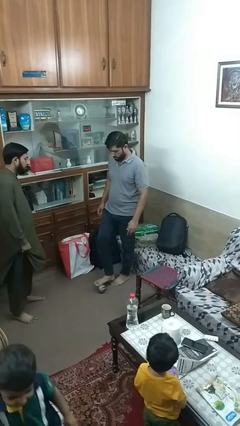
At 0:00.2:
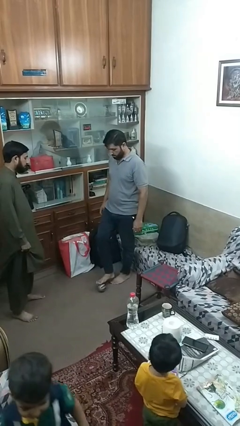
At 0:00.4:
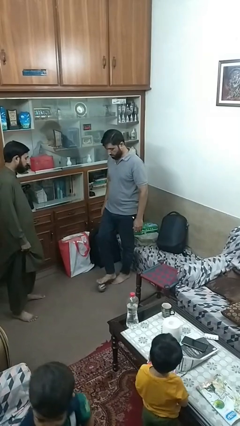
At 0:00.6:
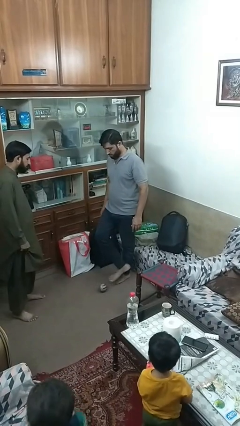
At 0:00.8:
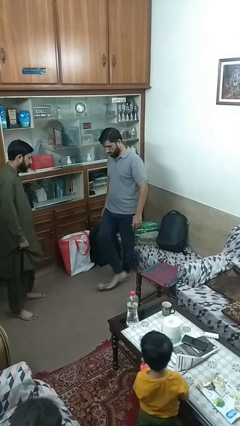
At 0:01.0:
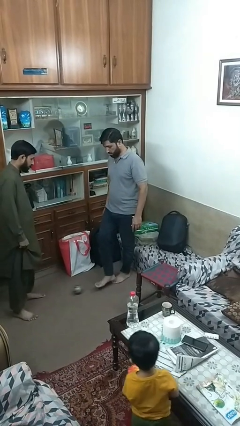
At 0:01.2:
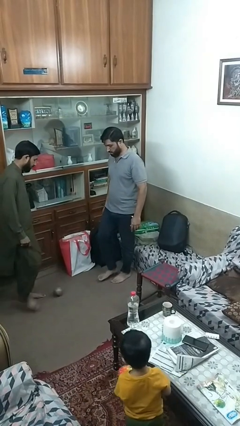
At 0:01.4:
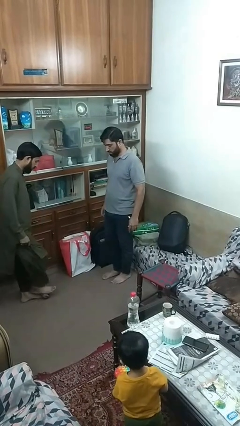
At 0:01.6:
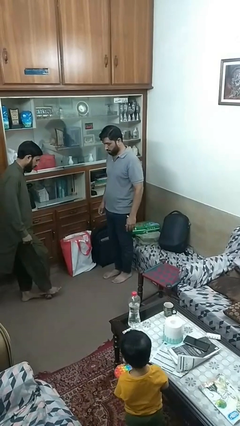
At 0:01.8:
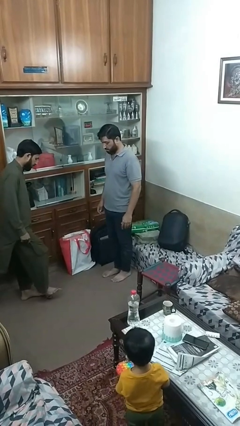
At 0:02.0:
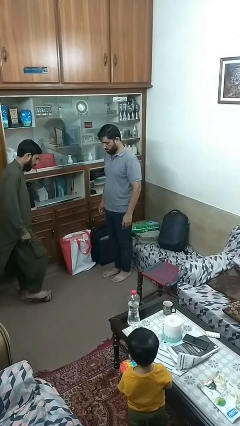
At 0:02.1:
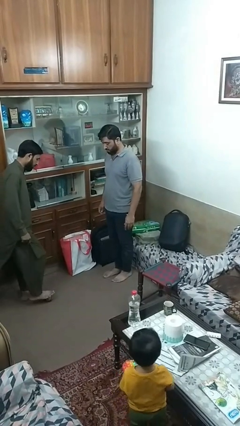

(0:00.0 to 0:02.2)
person kicks object to person

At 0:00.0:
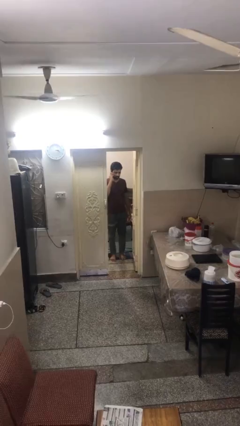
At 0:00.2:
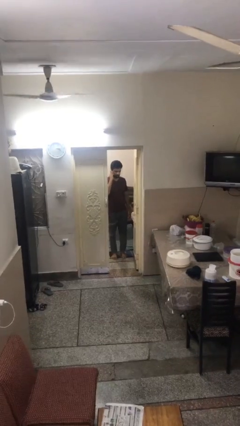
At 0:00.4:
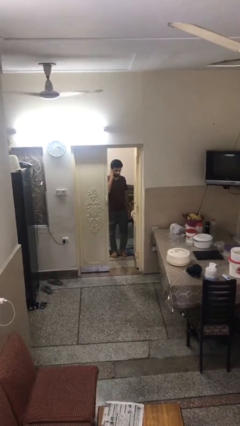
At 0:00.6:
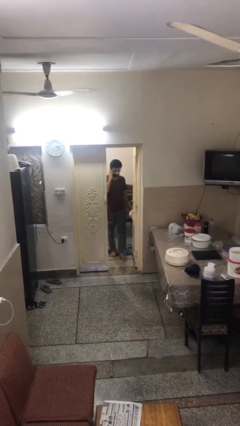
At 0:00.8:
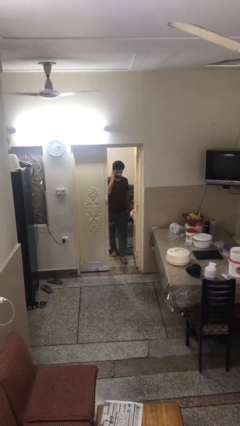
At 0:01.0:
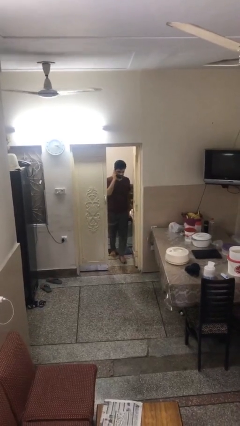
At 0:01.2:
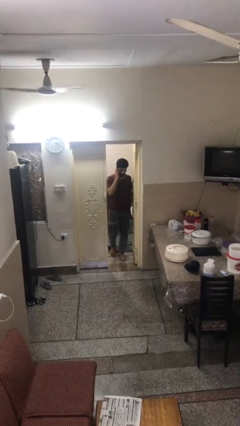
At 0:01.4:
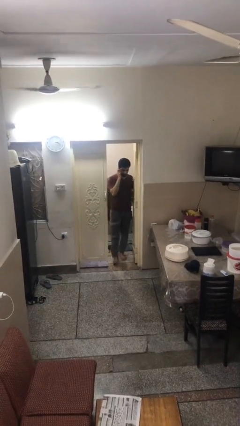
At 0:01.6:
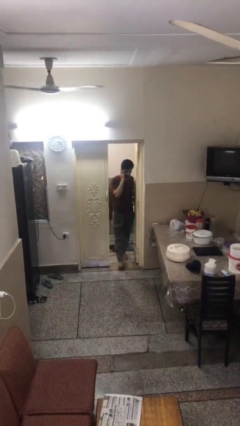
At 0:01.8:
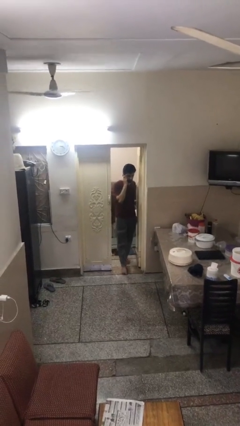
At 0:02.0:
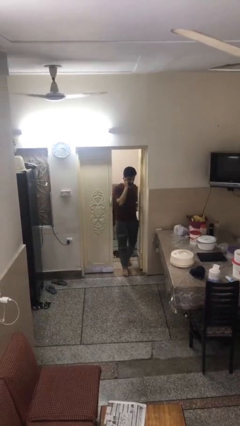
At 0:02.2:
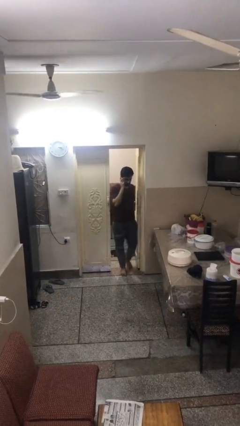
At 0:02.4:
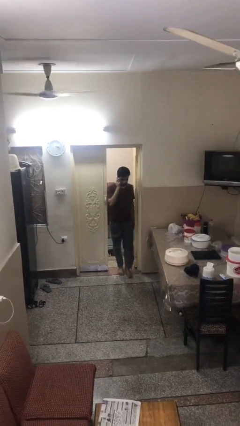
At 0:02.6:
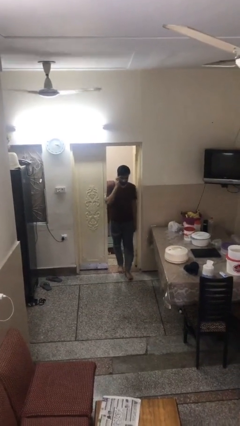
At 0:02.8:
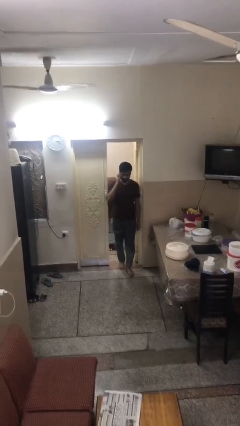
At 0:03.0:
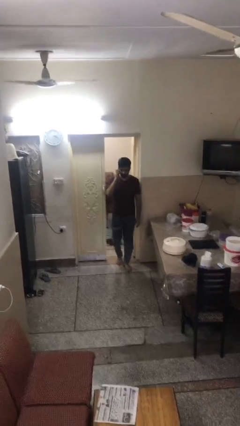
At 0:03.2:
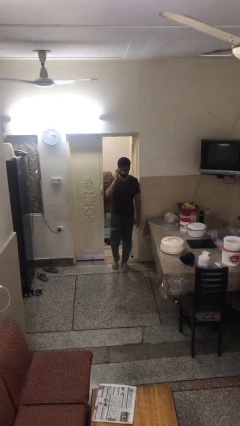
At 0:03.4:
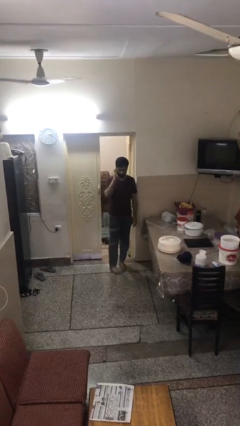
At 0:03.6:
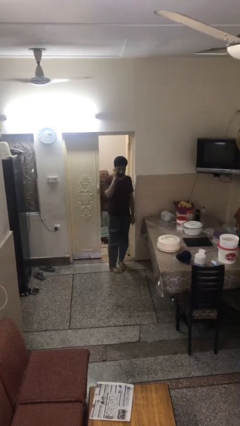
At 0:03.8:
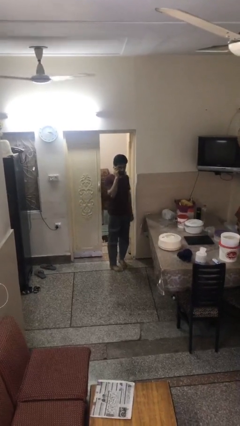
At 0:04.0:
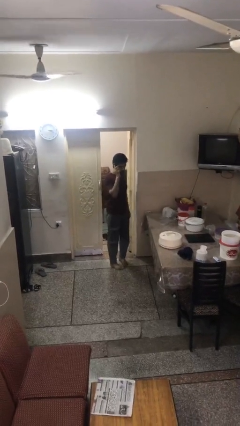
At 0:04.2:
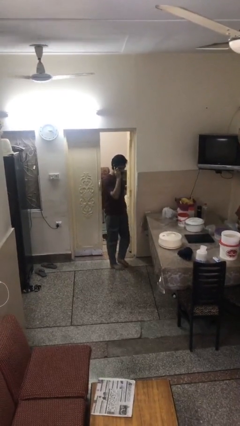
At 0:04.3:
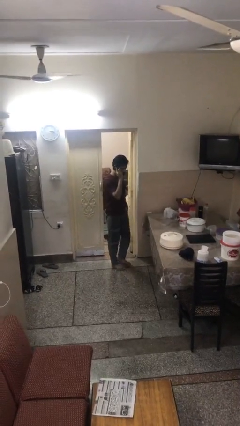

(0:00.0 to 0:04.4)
person enters scene through structure

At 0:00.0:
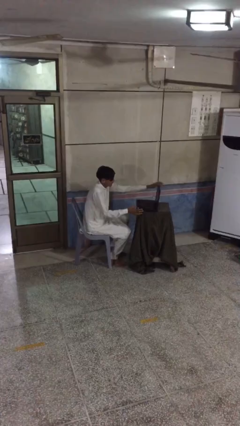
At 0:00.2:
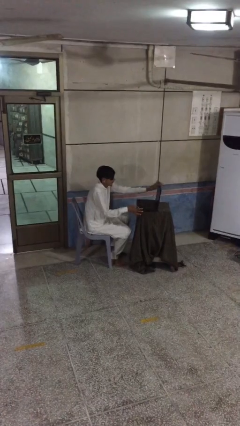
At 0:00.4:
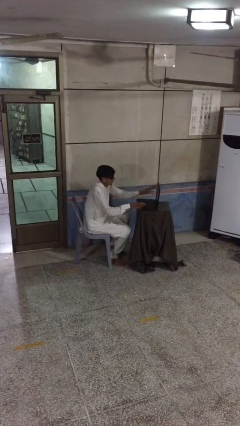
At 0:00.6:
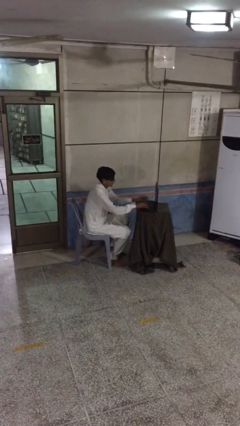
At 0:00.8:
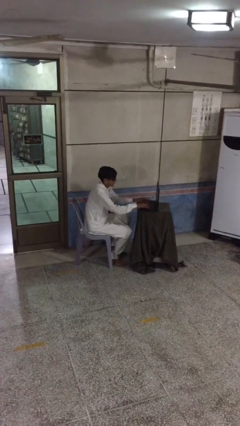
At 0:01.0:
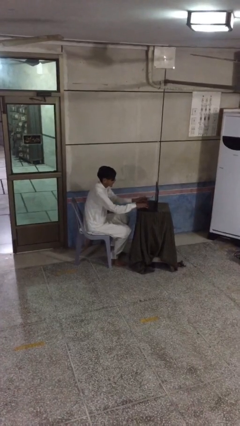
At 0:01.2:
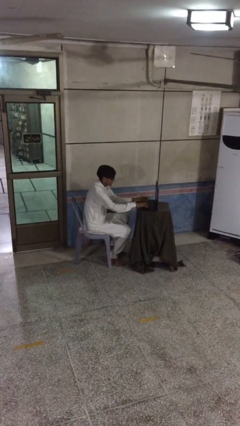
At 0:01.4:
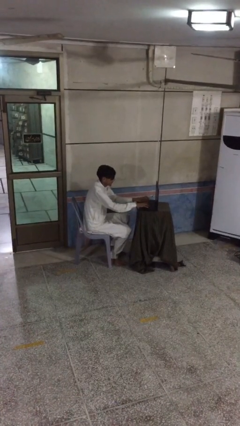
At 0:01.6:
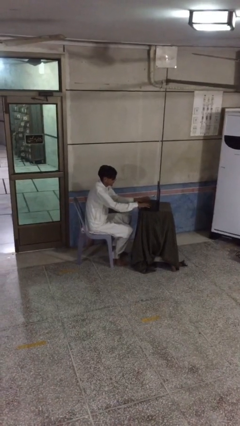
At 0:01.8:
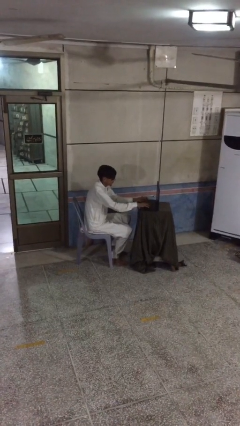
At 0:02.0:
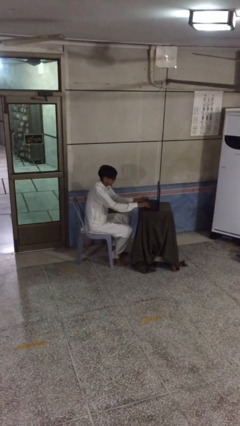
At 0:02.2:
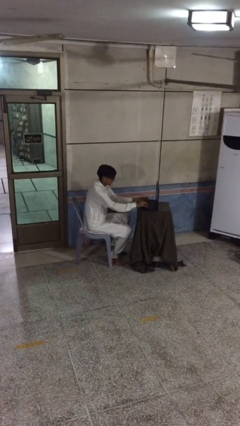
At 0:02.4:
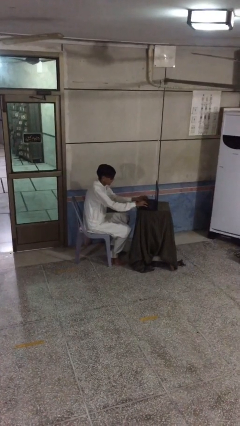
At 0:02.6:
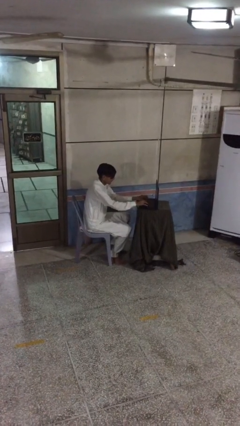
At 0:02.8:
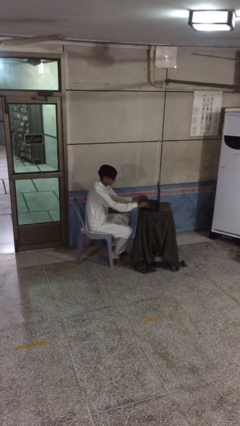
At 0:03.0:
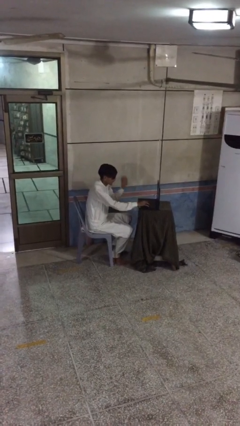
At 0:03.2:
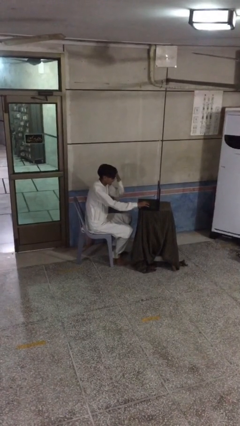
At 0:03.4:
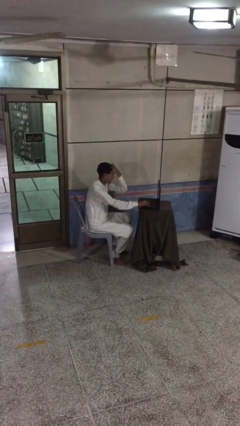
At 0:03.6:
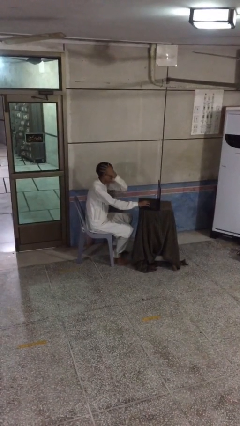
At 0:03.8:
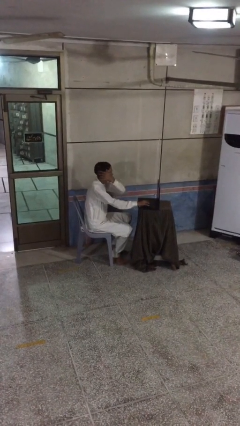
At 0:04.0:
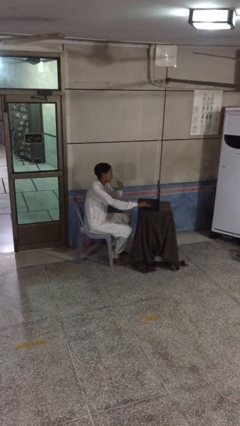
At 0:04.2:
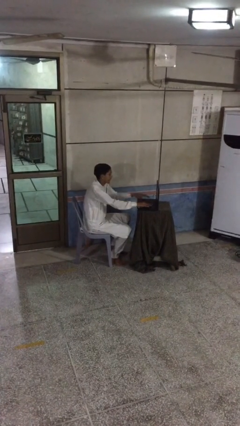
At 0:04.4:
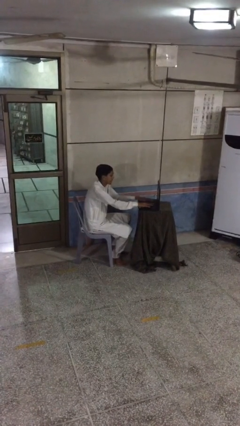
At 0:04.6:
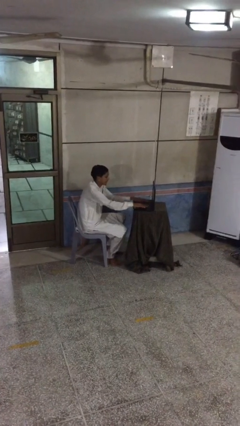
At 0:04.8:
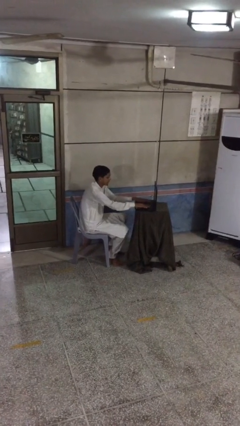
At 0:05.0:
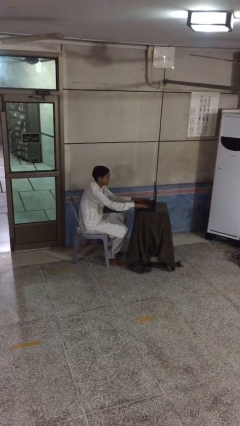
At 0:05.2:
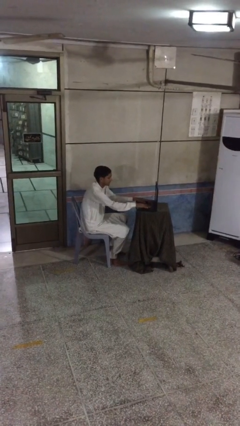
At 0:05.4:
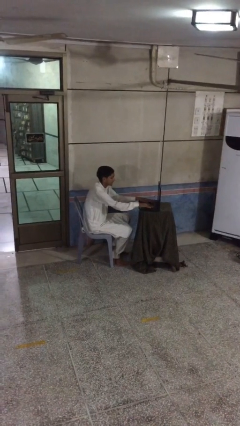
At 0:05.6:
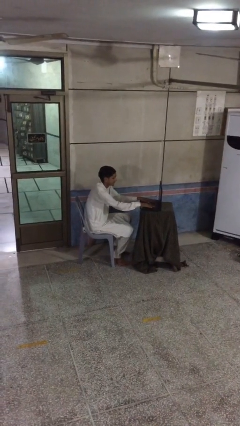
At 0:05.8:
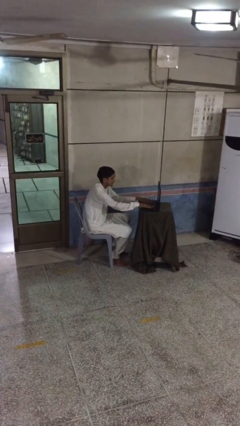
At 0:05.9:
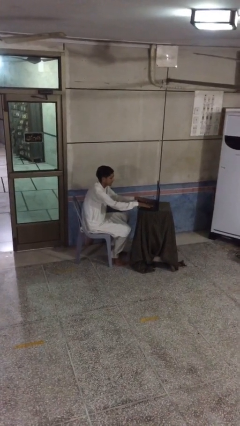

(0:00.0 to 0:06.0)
person interacts with laptop

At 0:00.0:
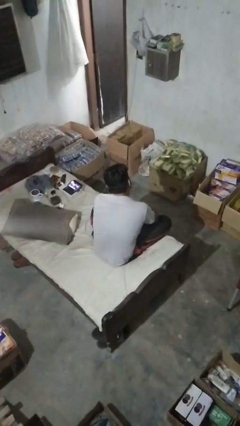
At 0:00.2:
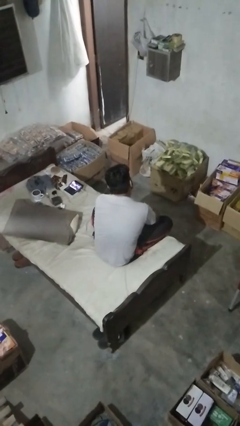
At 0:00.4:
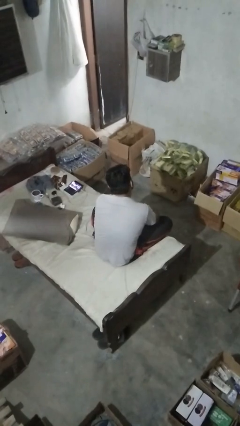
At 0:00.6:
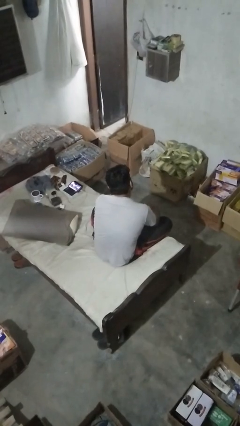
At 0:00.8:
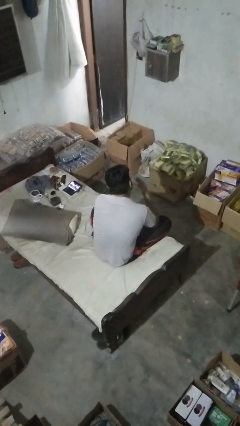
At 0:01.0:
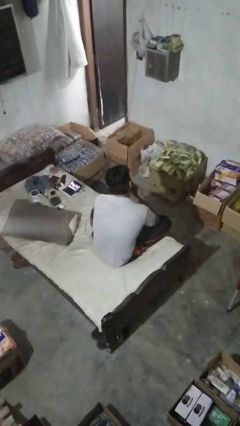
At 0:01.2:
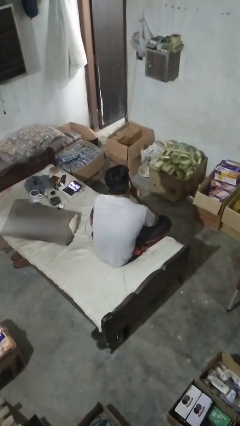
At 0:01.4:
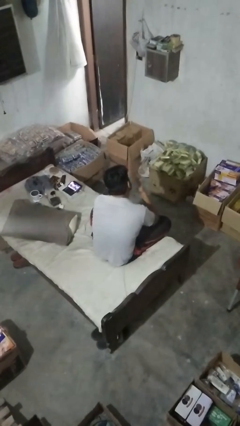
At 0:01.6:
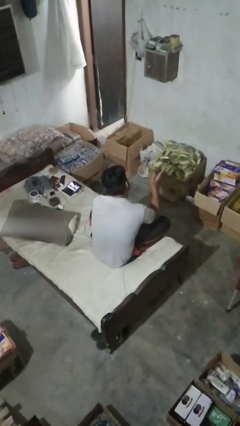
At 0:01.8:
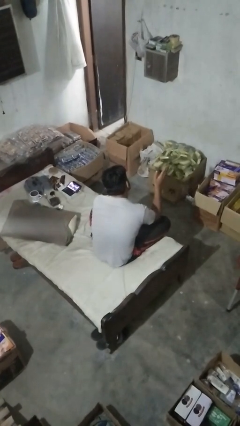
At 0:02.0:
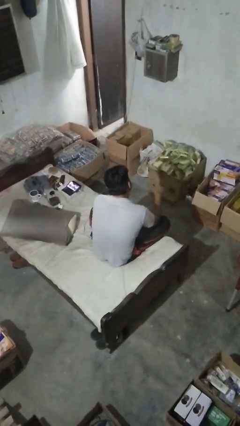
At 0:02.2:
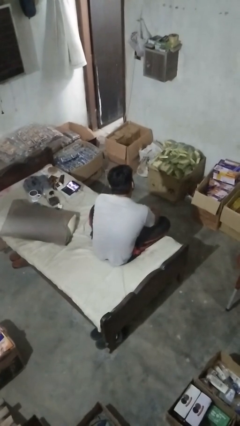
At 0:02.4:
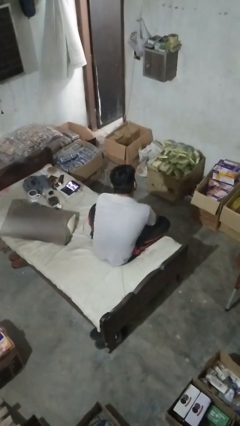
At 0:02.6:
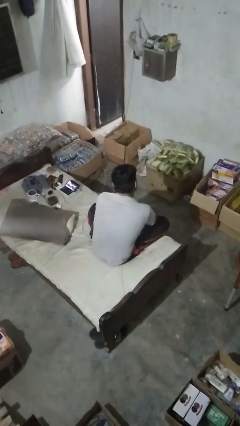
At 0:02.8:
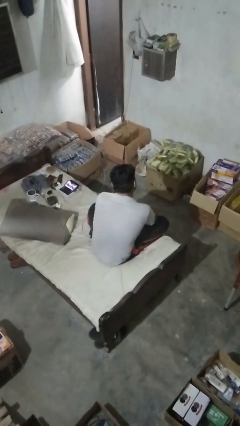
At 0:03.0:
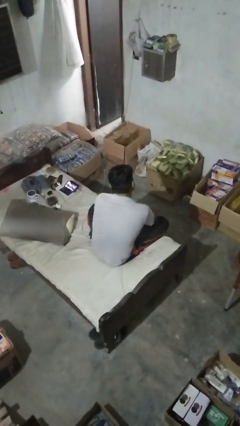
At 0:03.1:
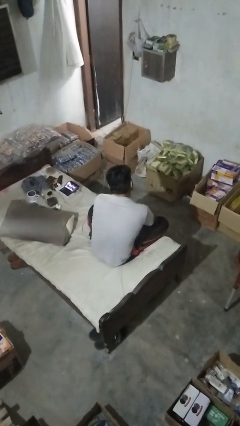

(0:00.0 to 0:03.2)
person gestures blow kiss

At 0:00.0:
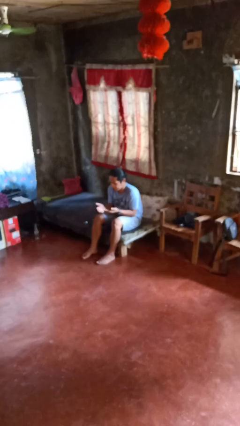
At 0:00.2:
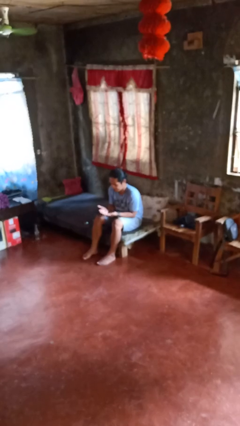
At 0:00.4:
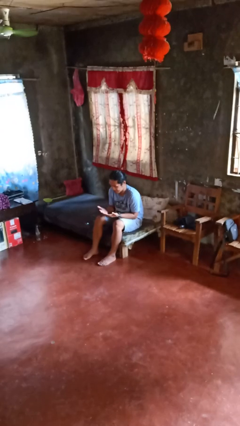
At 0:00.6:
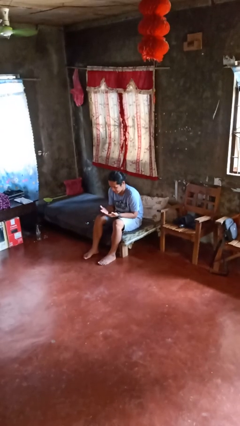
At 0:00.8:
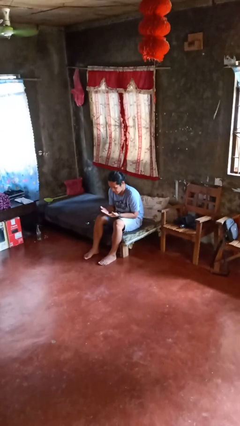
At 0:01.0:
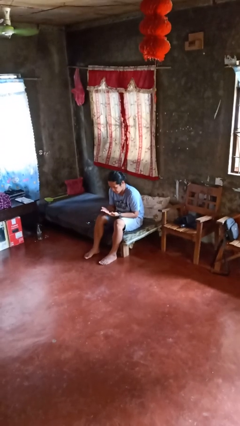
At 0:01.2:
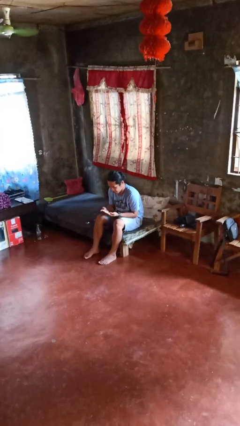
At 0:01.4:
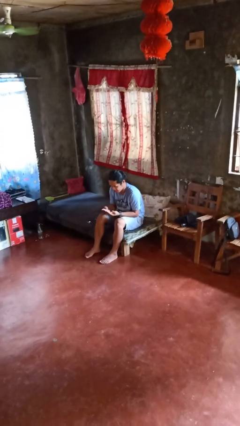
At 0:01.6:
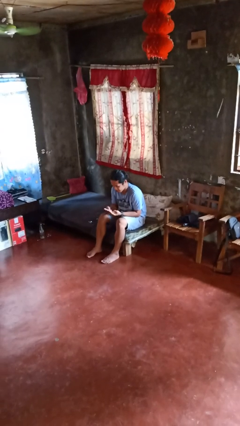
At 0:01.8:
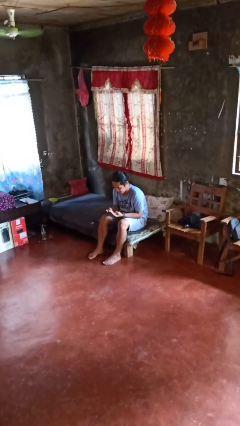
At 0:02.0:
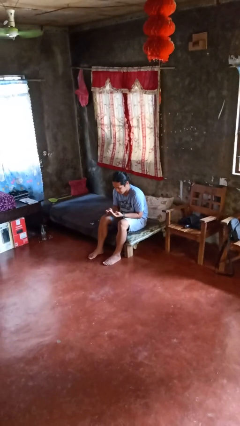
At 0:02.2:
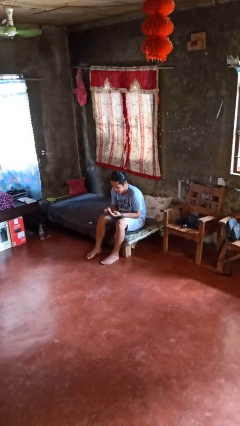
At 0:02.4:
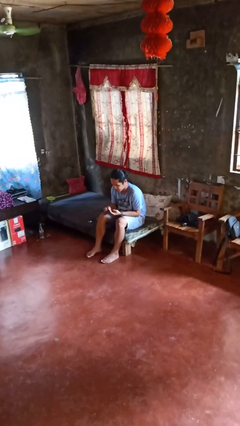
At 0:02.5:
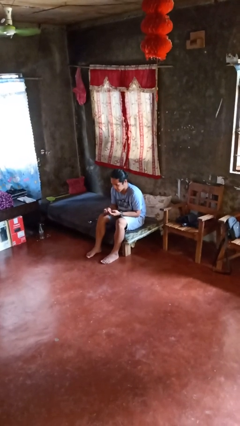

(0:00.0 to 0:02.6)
person looks at hands in lap
